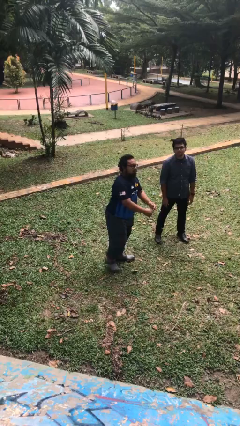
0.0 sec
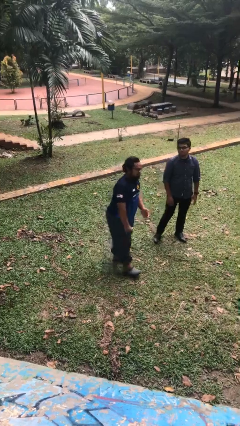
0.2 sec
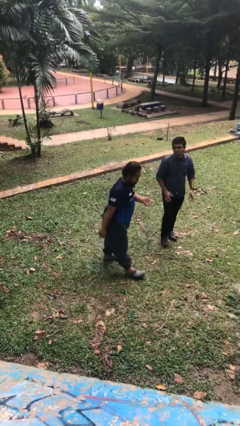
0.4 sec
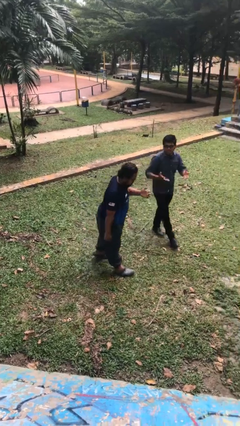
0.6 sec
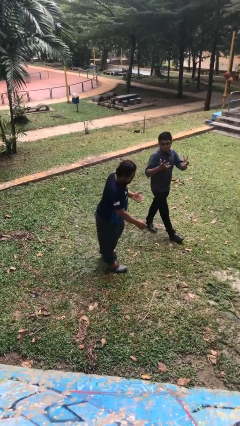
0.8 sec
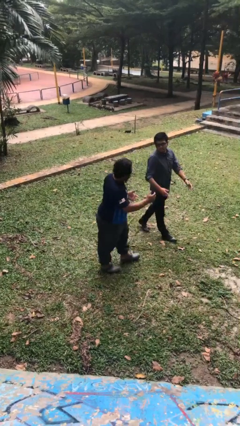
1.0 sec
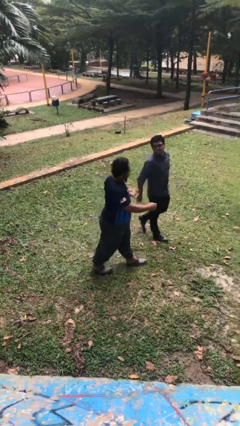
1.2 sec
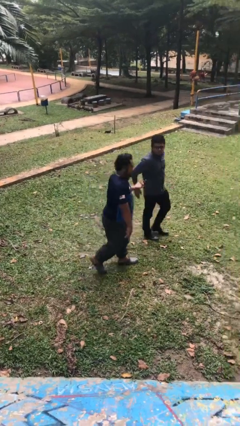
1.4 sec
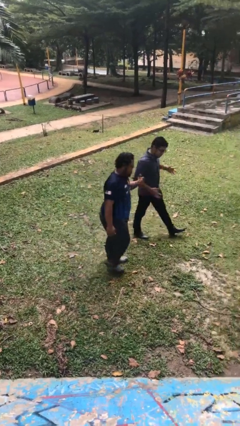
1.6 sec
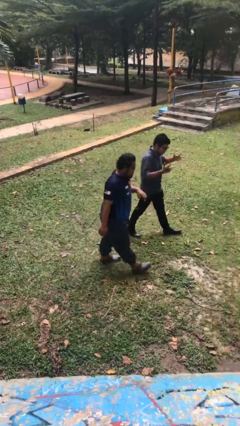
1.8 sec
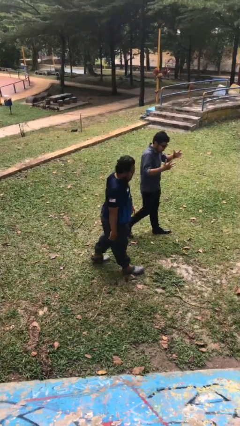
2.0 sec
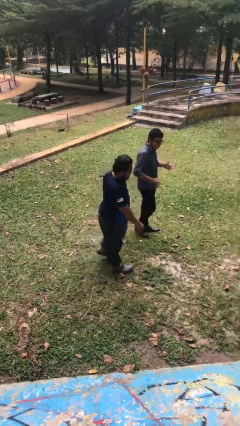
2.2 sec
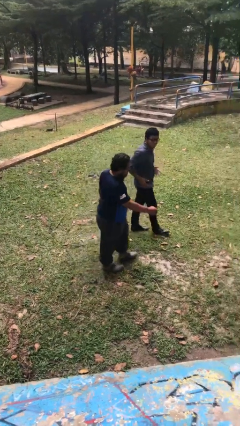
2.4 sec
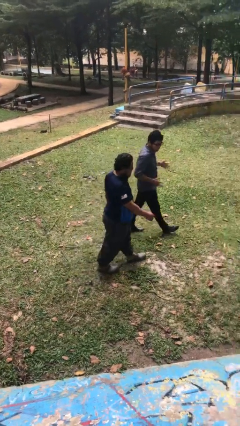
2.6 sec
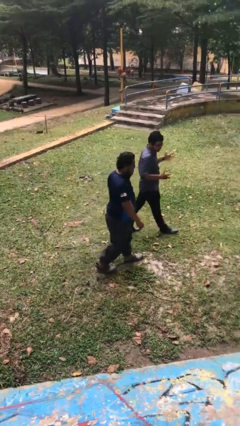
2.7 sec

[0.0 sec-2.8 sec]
person talks to person

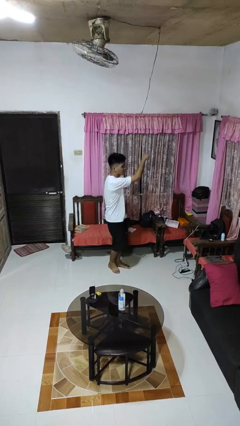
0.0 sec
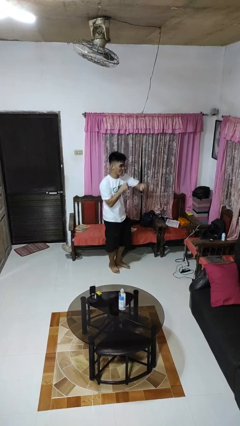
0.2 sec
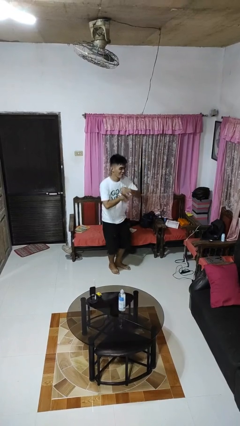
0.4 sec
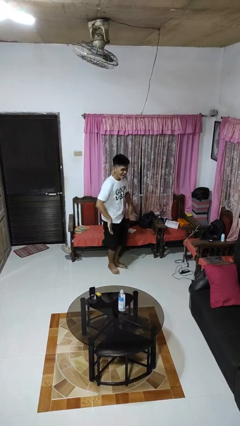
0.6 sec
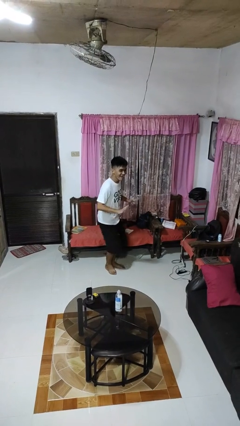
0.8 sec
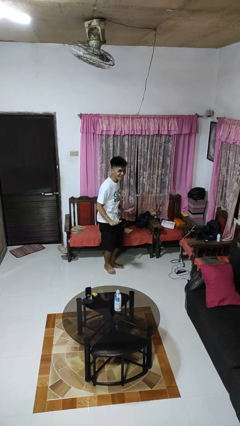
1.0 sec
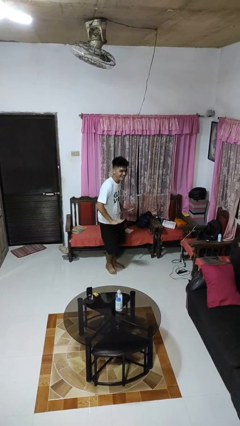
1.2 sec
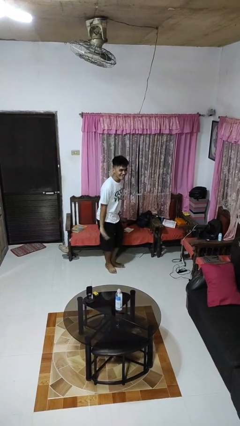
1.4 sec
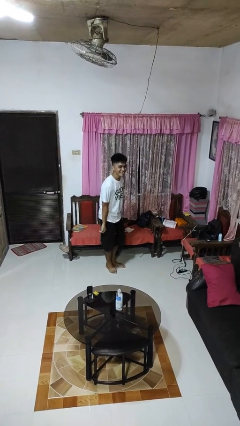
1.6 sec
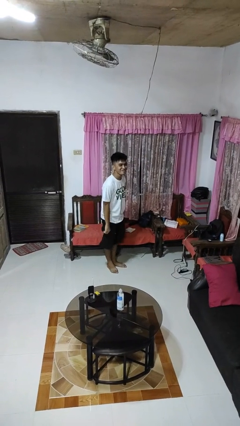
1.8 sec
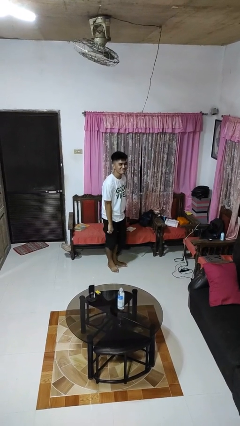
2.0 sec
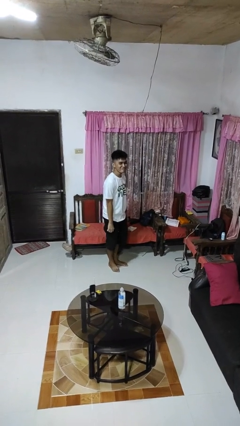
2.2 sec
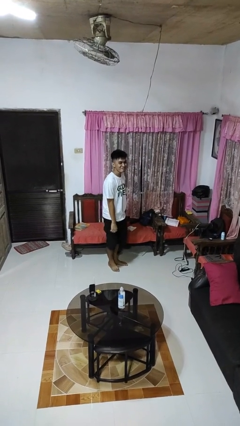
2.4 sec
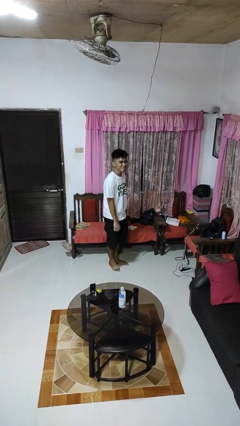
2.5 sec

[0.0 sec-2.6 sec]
person dances in place

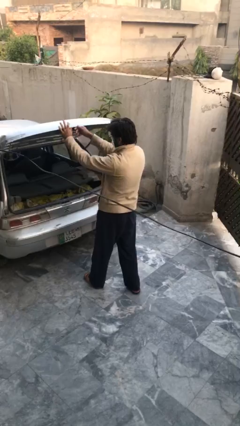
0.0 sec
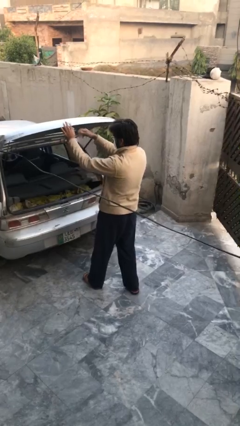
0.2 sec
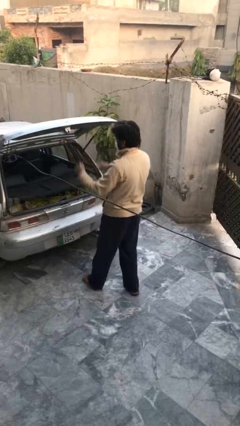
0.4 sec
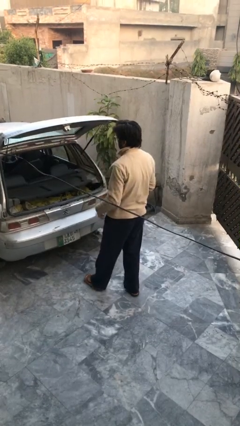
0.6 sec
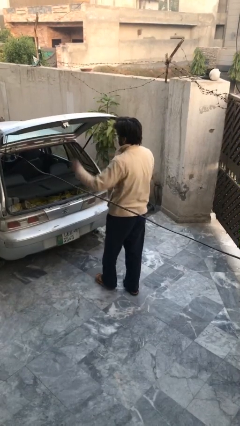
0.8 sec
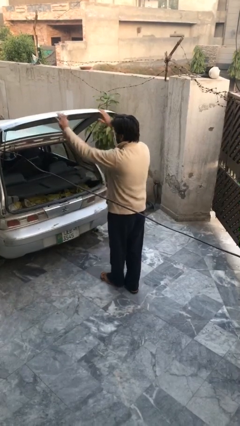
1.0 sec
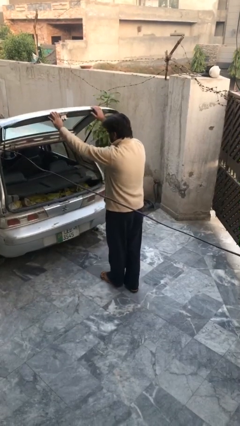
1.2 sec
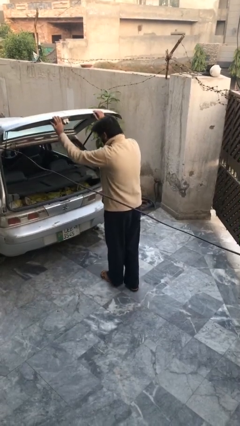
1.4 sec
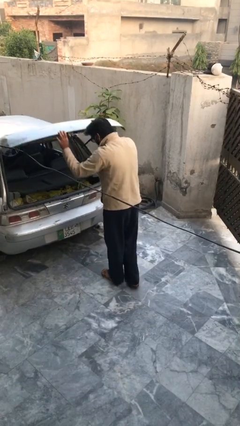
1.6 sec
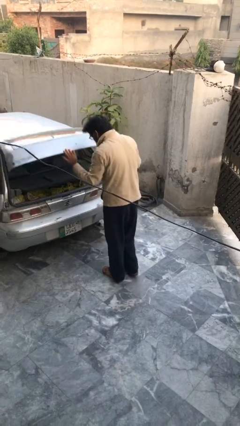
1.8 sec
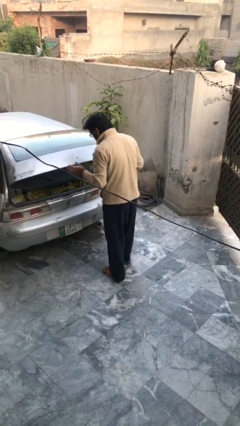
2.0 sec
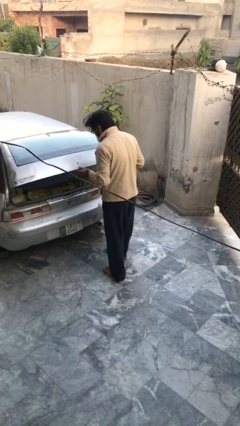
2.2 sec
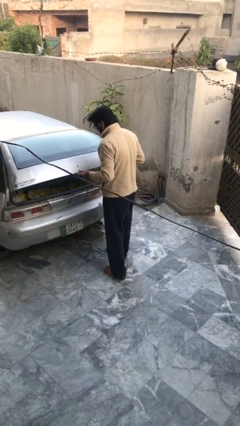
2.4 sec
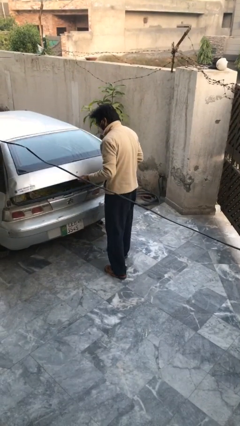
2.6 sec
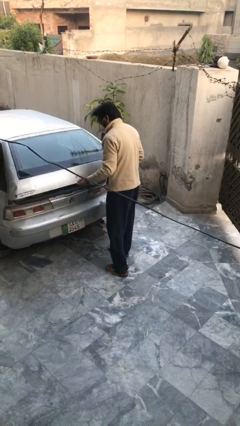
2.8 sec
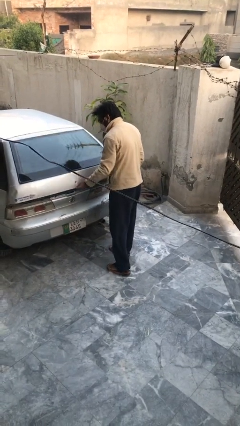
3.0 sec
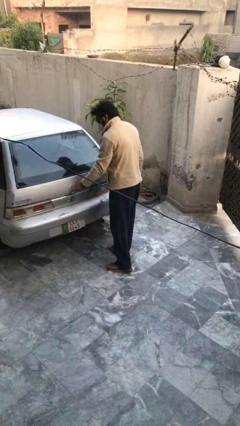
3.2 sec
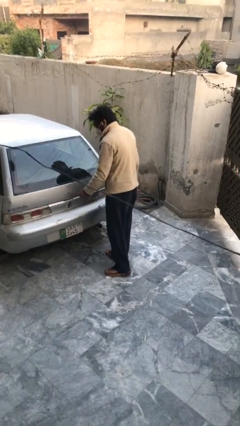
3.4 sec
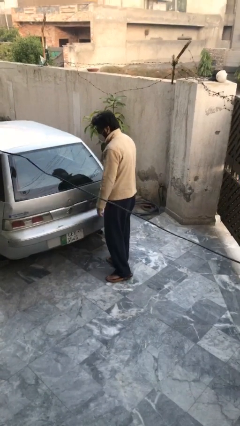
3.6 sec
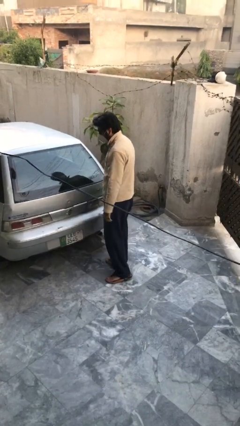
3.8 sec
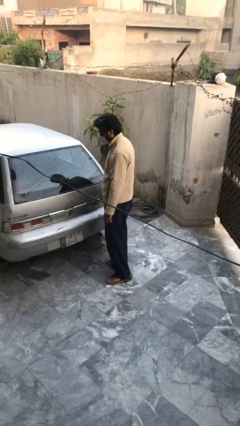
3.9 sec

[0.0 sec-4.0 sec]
person closes car trunk

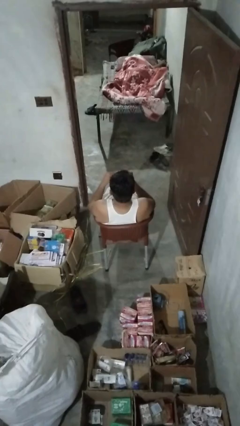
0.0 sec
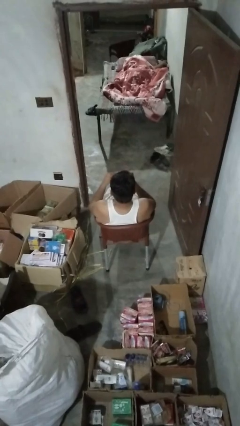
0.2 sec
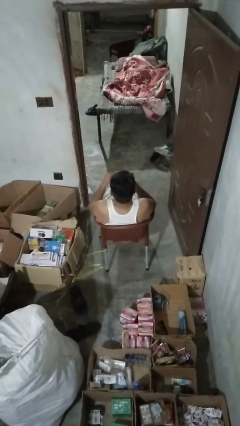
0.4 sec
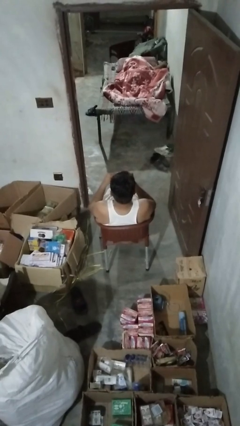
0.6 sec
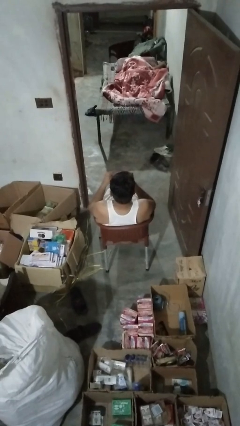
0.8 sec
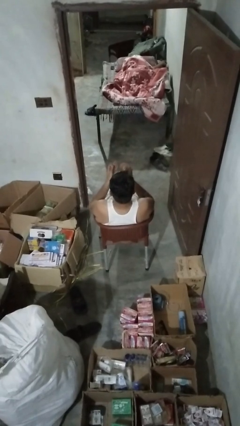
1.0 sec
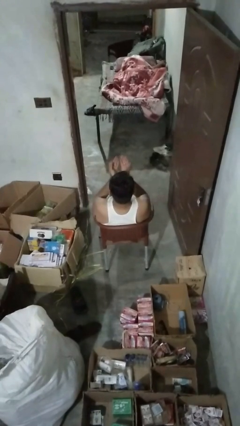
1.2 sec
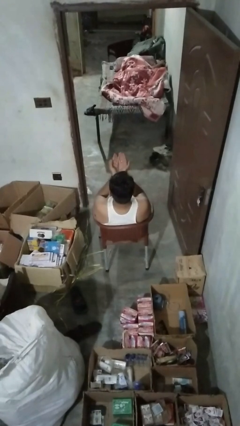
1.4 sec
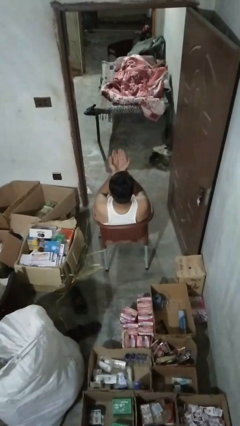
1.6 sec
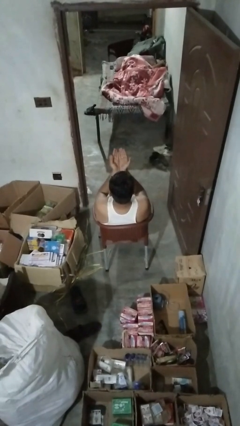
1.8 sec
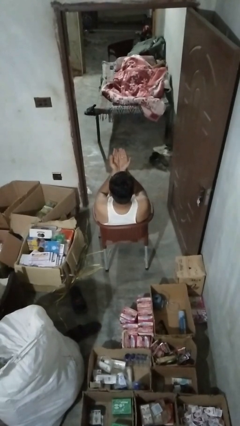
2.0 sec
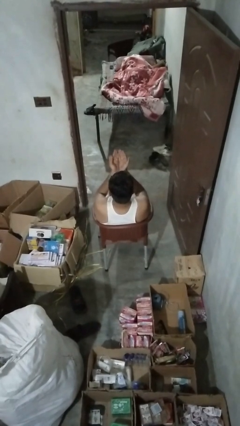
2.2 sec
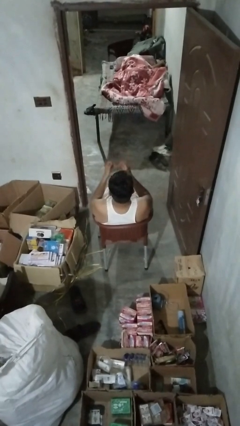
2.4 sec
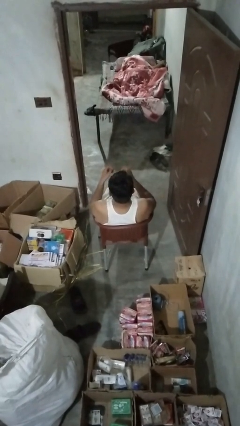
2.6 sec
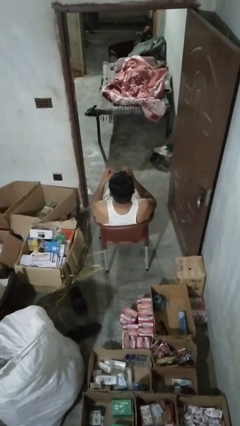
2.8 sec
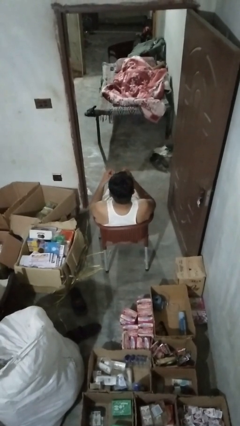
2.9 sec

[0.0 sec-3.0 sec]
person prays

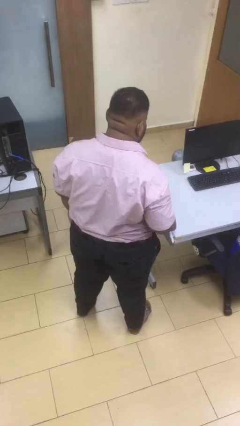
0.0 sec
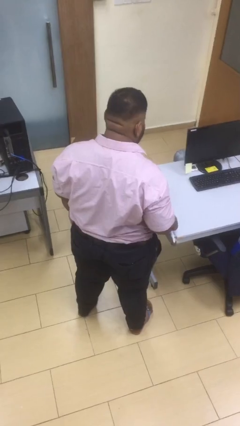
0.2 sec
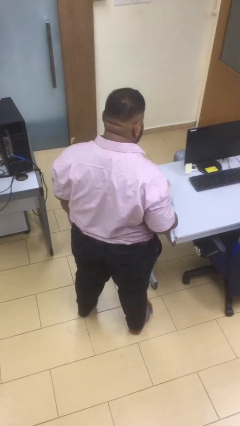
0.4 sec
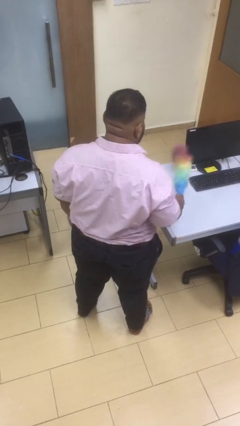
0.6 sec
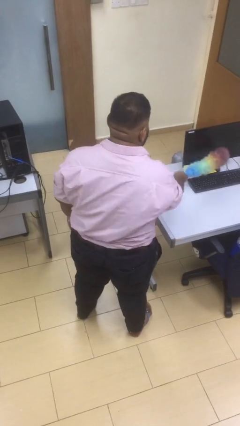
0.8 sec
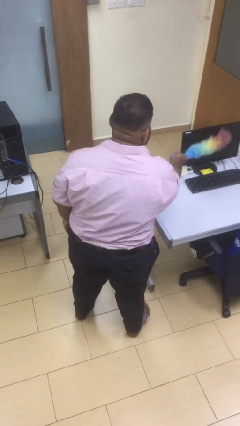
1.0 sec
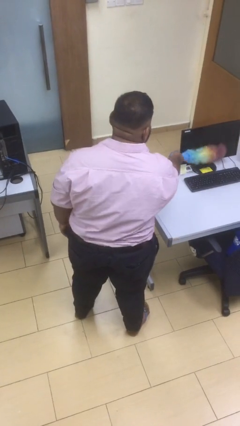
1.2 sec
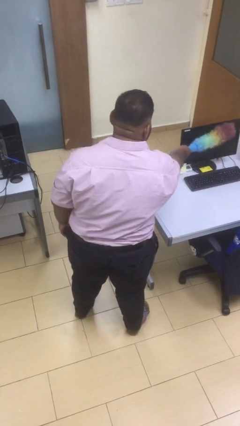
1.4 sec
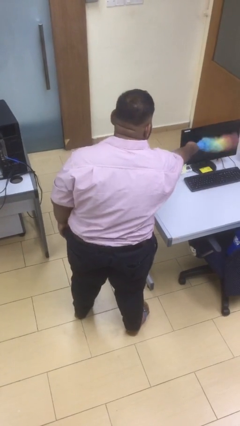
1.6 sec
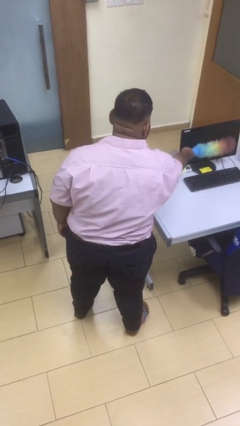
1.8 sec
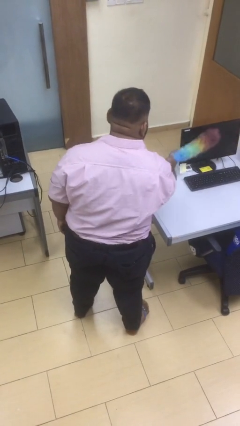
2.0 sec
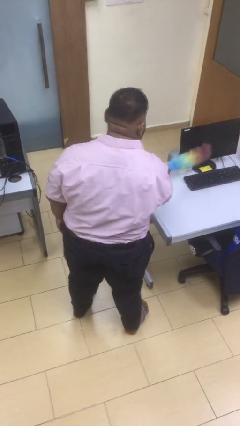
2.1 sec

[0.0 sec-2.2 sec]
person dusts furniture

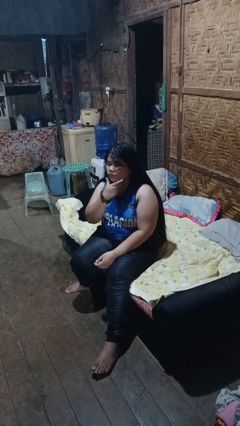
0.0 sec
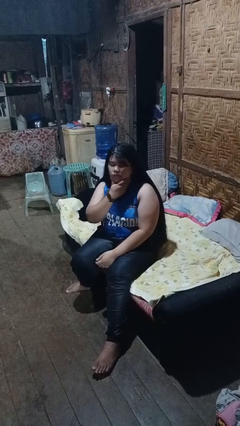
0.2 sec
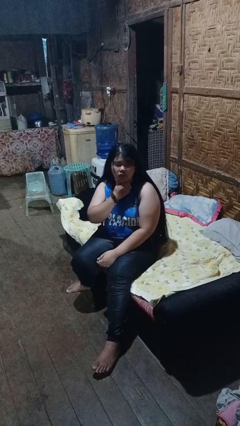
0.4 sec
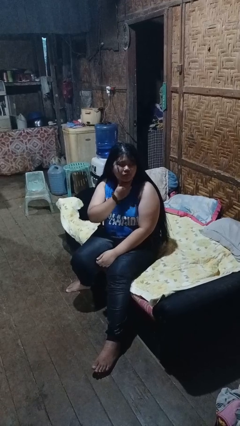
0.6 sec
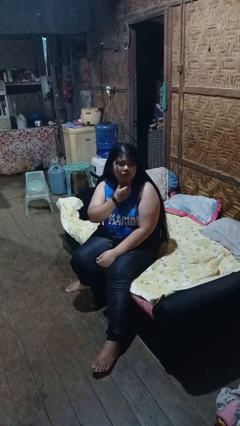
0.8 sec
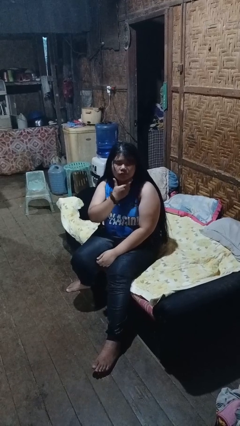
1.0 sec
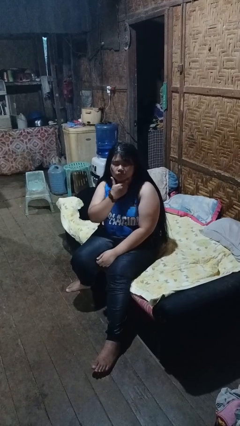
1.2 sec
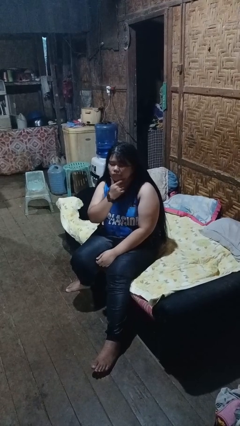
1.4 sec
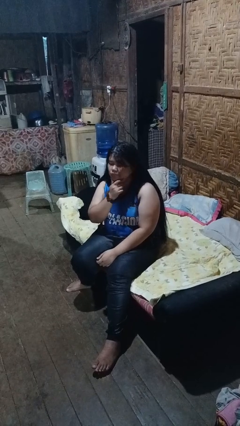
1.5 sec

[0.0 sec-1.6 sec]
person strokes chin

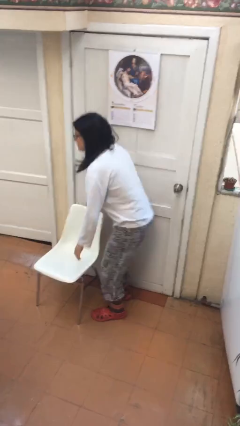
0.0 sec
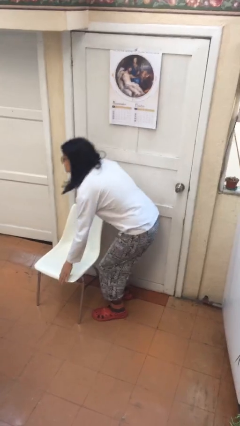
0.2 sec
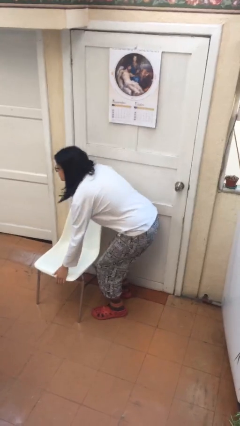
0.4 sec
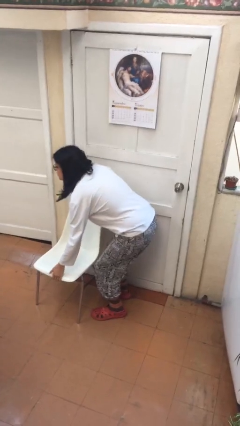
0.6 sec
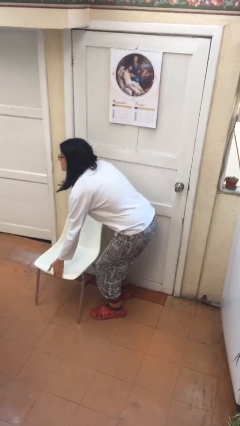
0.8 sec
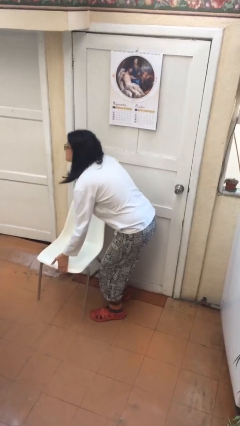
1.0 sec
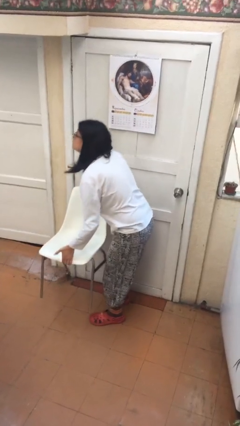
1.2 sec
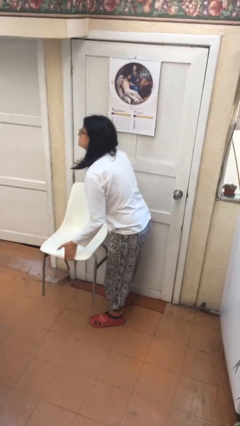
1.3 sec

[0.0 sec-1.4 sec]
person picks up object from floor
